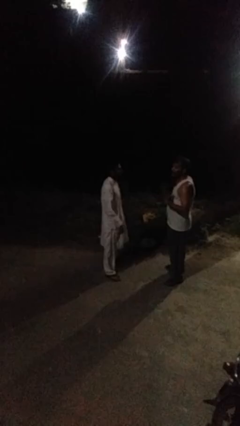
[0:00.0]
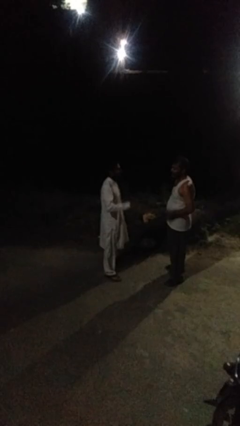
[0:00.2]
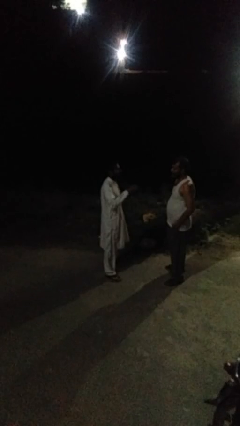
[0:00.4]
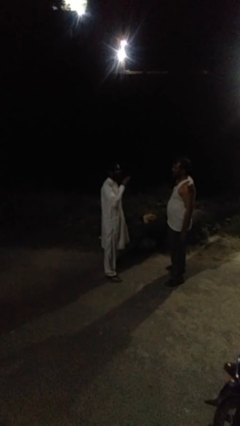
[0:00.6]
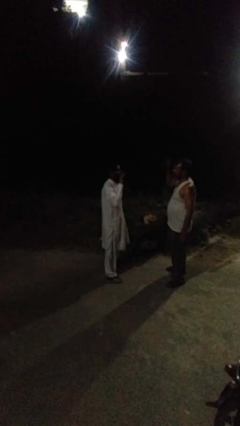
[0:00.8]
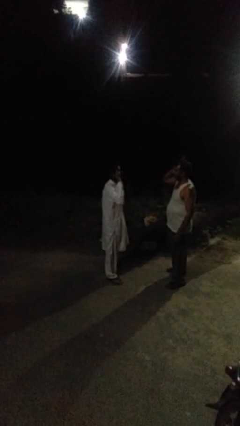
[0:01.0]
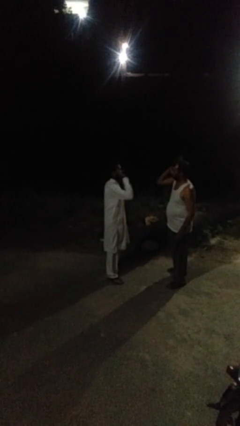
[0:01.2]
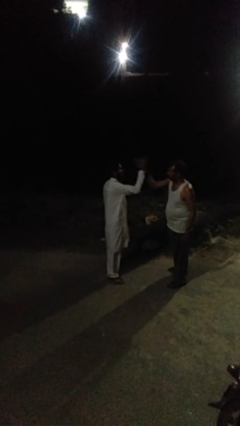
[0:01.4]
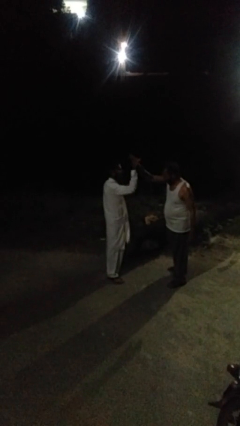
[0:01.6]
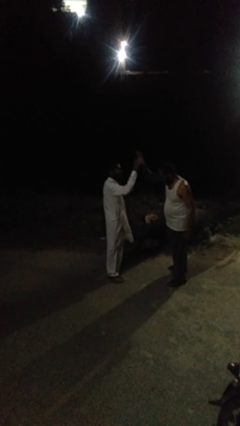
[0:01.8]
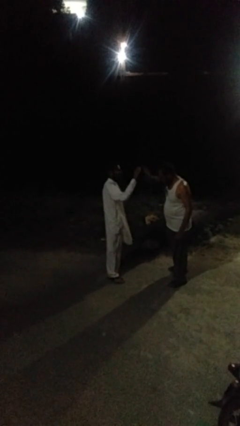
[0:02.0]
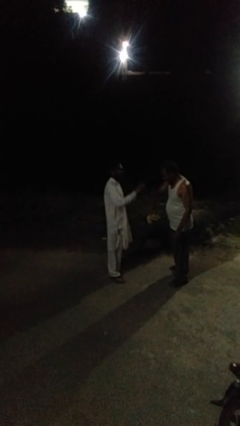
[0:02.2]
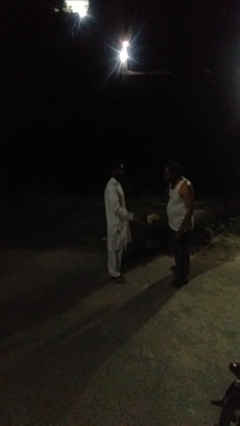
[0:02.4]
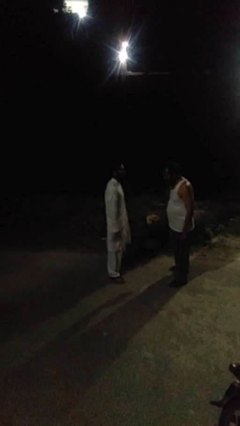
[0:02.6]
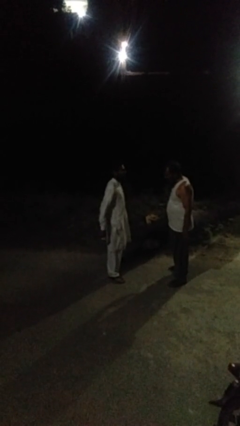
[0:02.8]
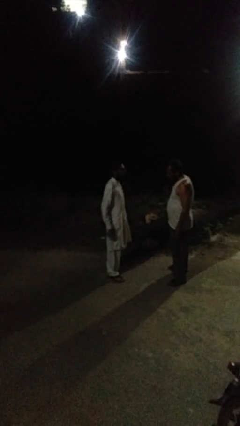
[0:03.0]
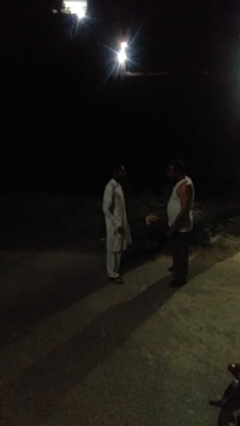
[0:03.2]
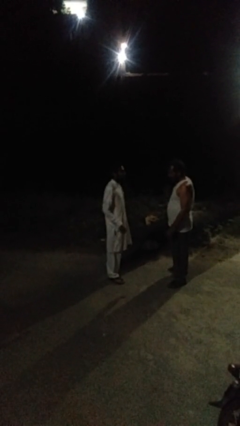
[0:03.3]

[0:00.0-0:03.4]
person highfives hand

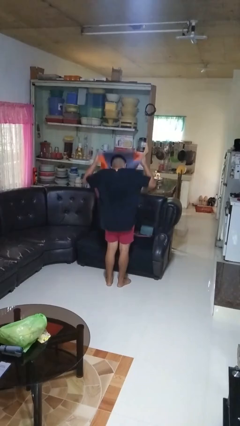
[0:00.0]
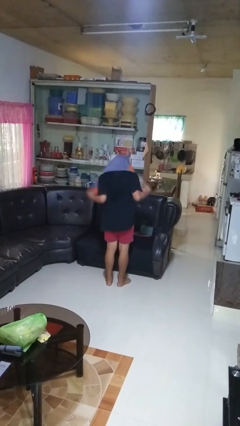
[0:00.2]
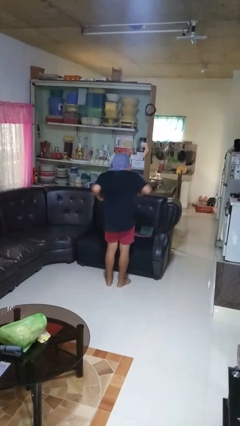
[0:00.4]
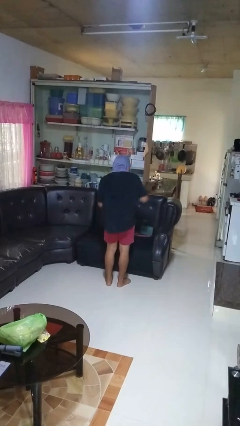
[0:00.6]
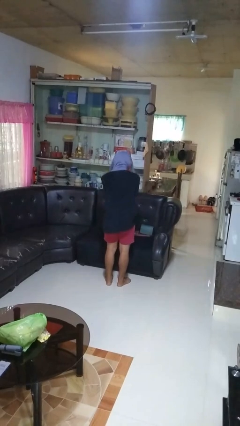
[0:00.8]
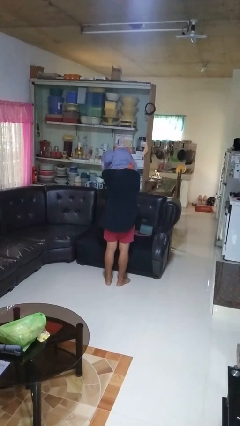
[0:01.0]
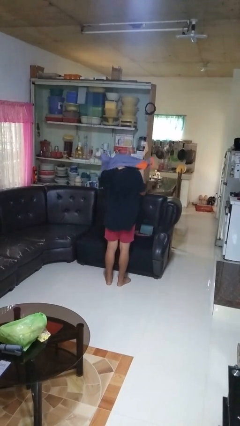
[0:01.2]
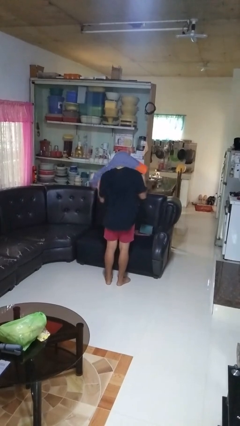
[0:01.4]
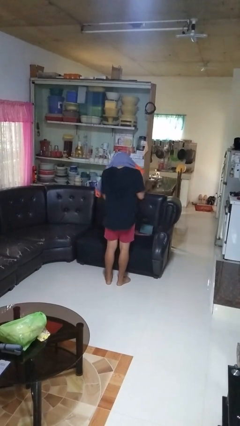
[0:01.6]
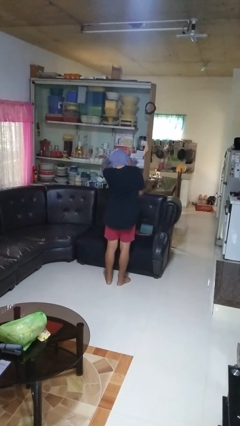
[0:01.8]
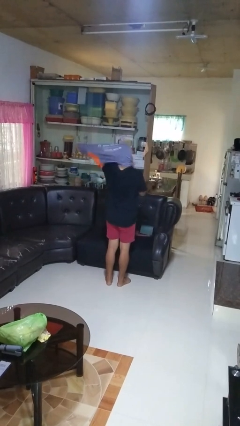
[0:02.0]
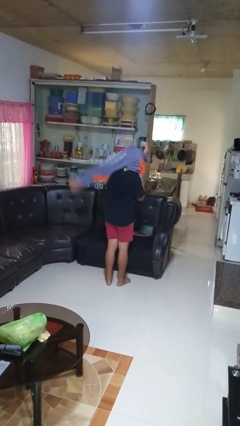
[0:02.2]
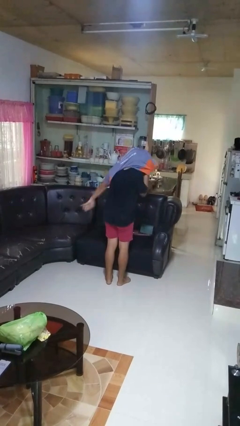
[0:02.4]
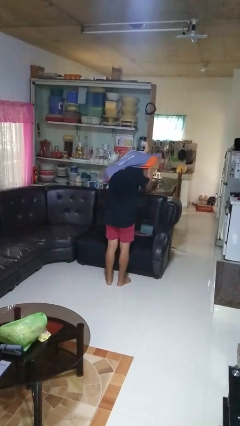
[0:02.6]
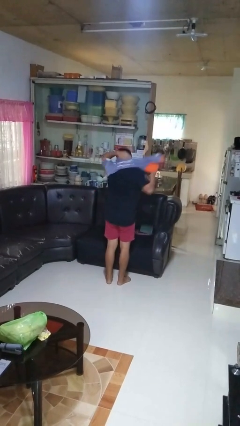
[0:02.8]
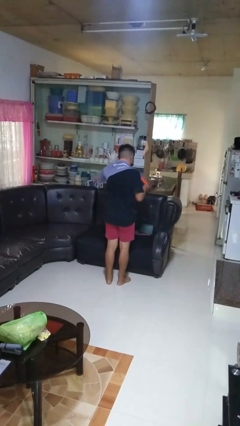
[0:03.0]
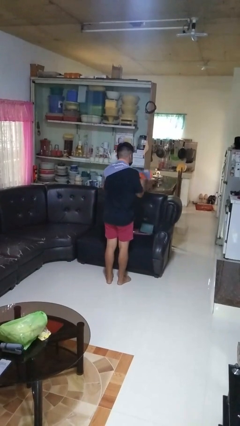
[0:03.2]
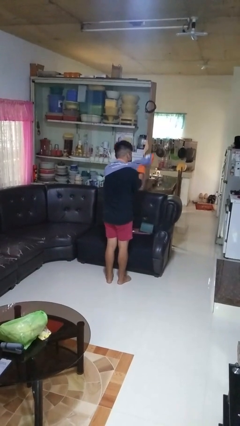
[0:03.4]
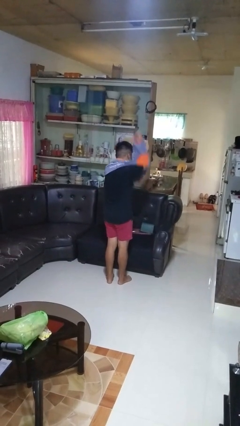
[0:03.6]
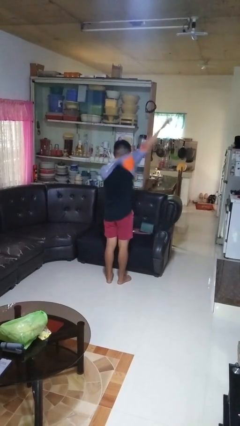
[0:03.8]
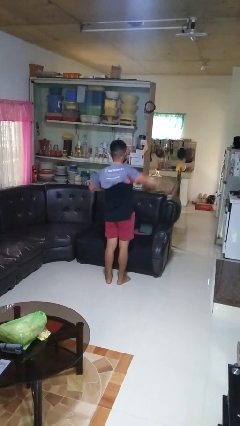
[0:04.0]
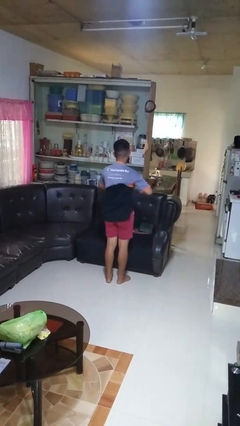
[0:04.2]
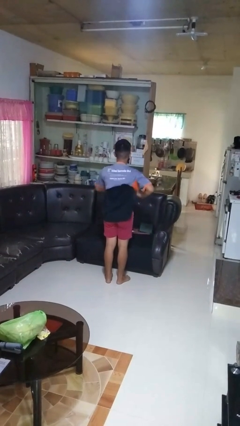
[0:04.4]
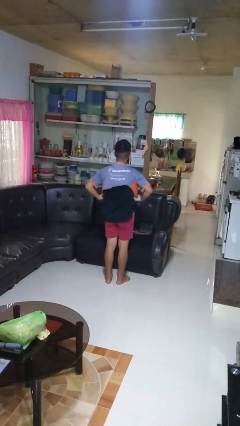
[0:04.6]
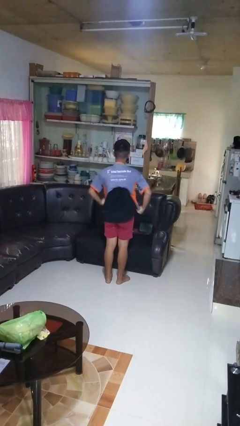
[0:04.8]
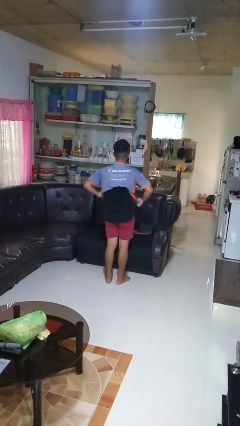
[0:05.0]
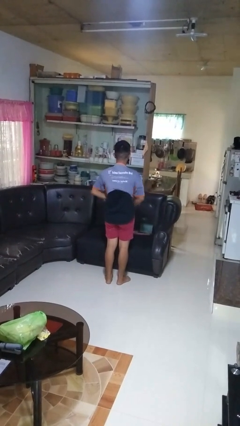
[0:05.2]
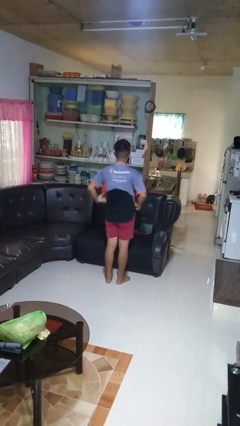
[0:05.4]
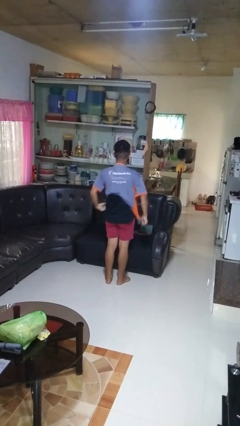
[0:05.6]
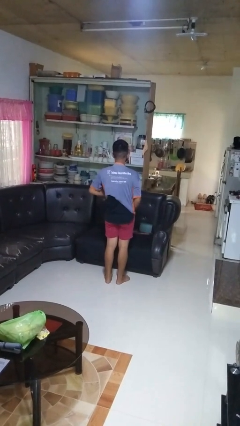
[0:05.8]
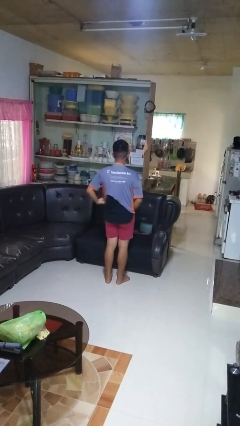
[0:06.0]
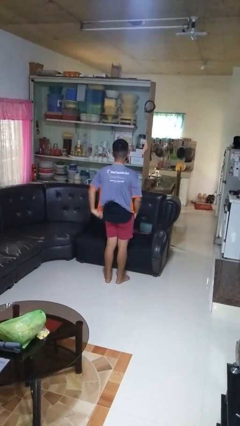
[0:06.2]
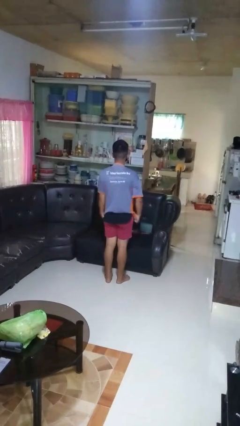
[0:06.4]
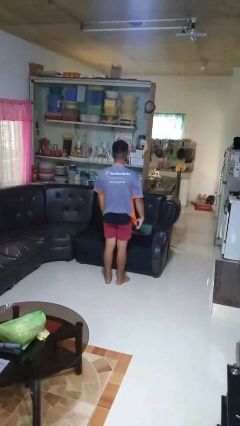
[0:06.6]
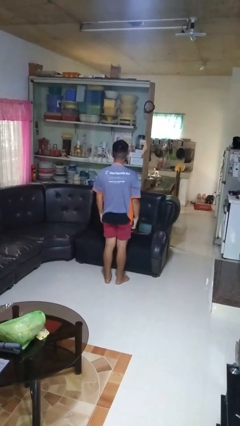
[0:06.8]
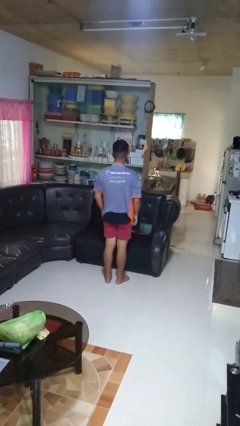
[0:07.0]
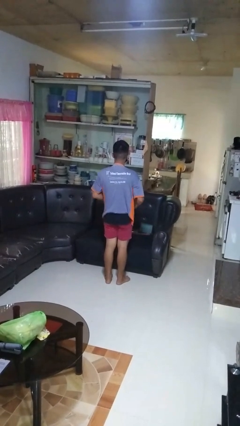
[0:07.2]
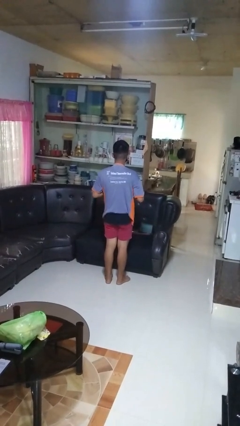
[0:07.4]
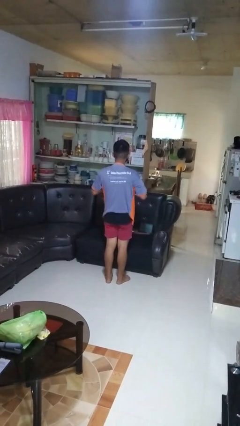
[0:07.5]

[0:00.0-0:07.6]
person puts on shirt

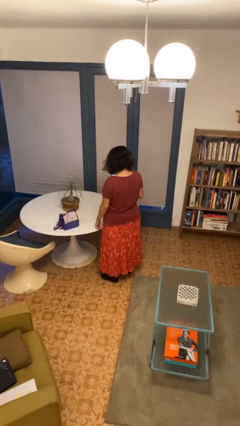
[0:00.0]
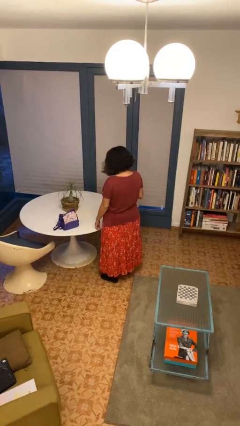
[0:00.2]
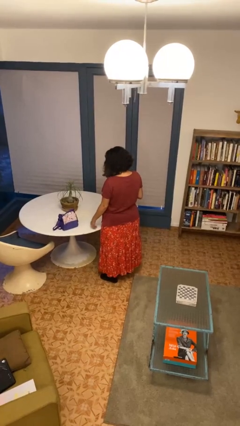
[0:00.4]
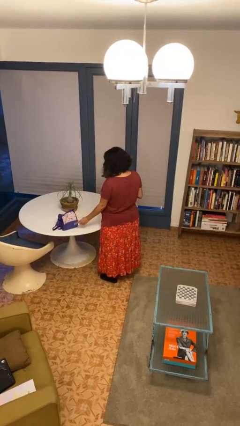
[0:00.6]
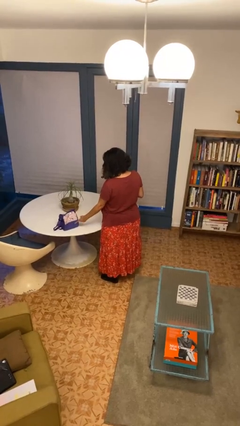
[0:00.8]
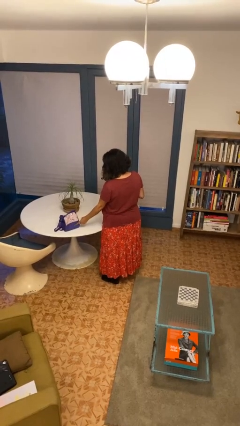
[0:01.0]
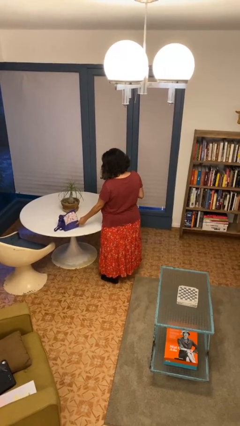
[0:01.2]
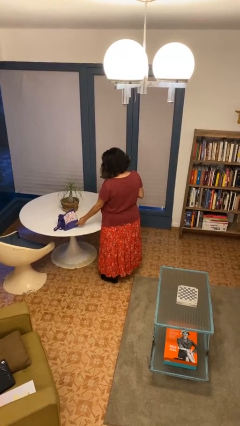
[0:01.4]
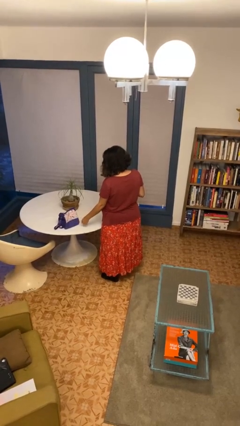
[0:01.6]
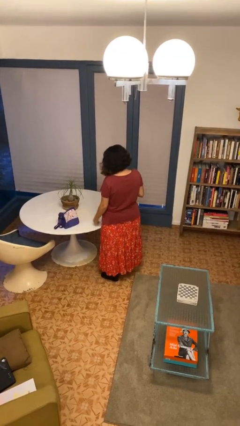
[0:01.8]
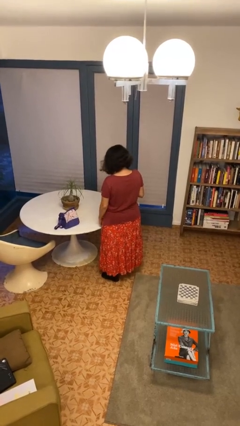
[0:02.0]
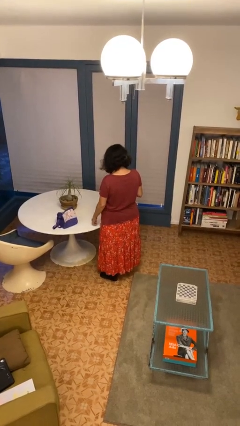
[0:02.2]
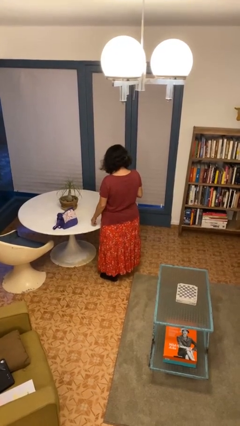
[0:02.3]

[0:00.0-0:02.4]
person taps object with finger

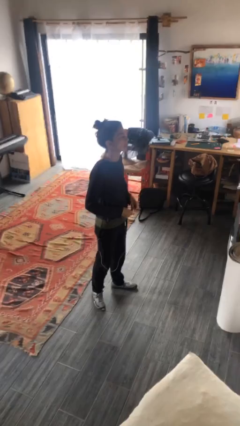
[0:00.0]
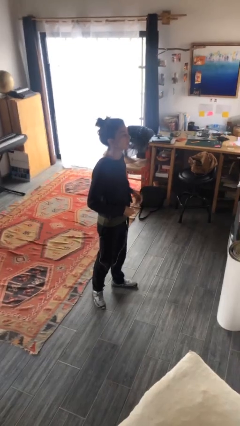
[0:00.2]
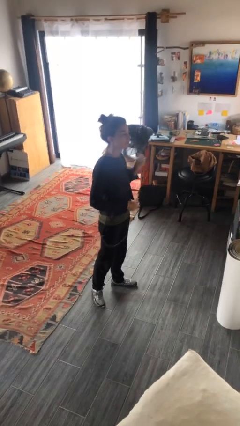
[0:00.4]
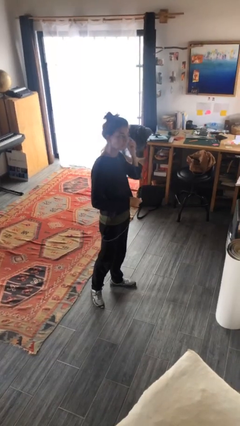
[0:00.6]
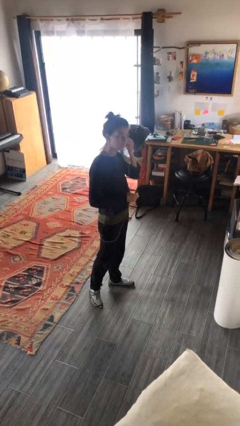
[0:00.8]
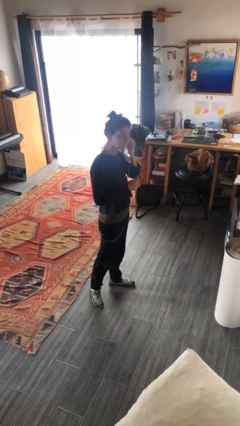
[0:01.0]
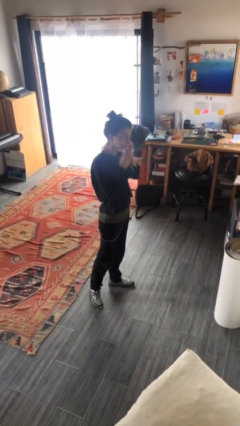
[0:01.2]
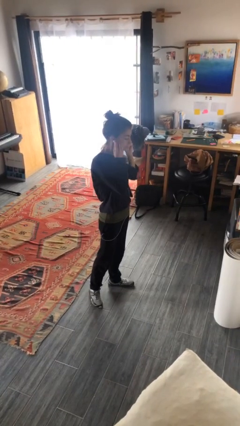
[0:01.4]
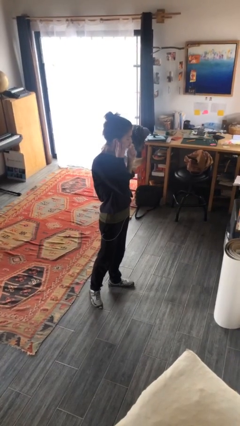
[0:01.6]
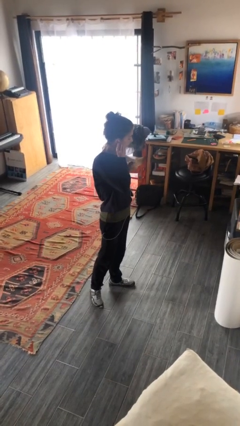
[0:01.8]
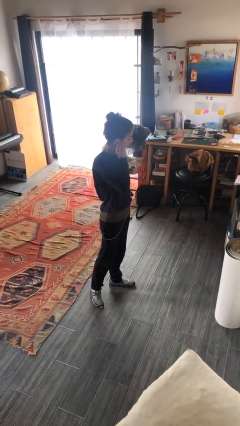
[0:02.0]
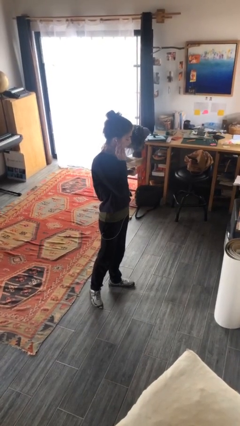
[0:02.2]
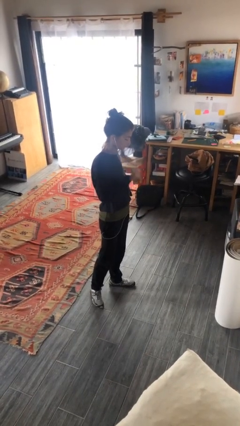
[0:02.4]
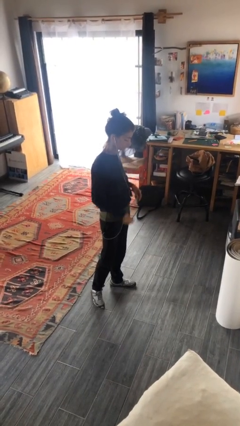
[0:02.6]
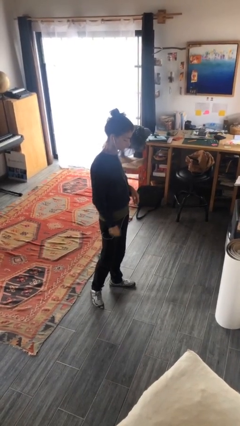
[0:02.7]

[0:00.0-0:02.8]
person puts on headphones

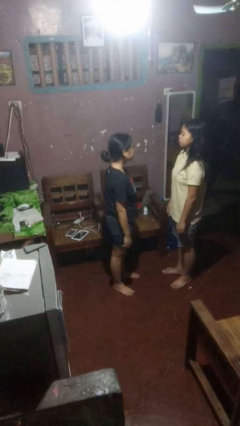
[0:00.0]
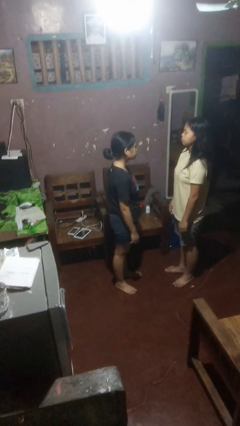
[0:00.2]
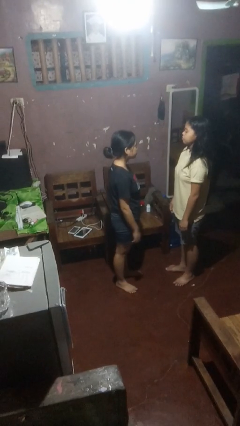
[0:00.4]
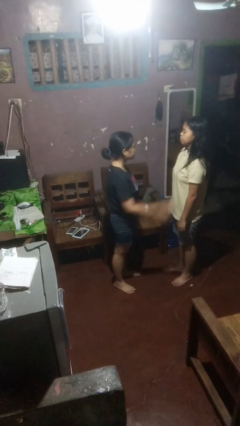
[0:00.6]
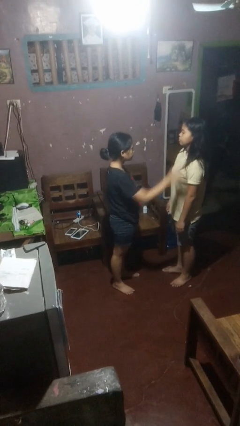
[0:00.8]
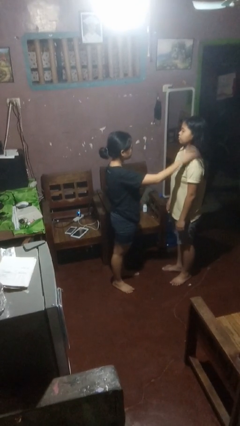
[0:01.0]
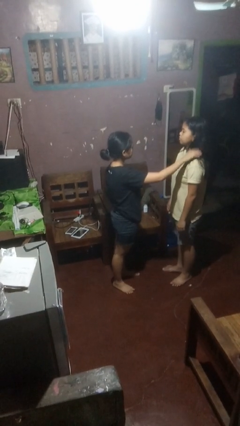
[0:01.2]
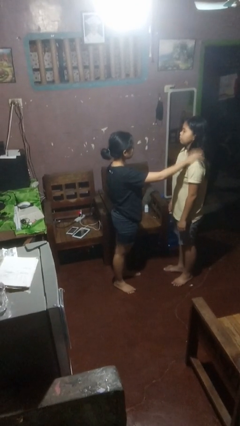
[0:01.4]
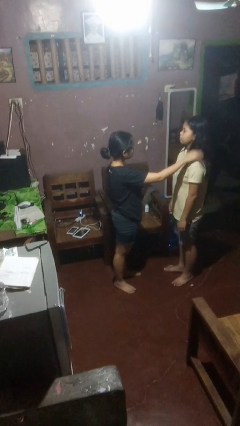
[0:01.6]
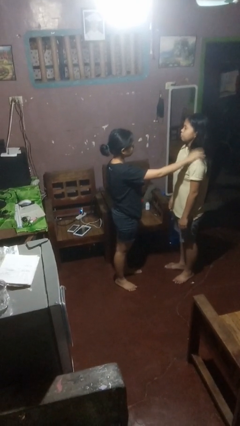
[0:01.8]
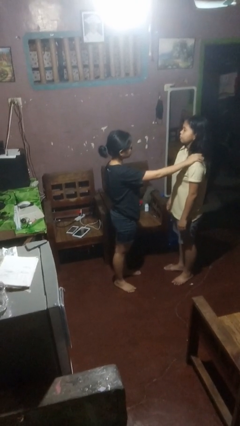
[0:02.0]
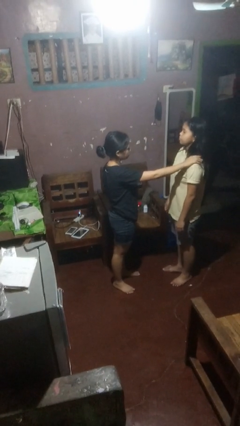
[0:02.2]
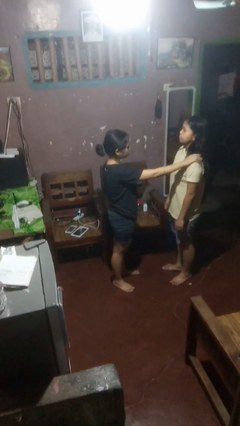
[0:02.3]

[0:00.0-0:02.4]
person pounds shoulders of person
